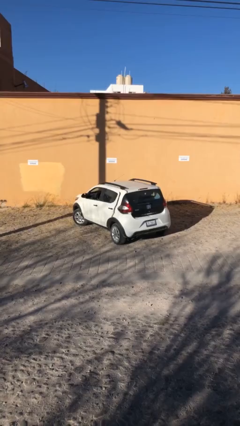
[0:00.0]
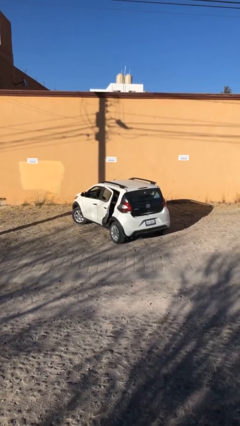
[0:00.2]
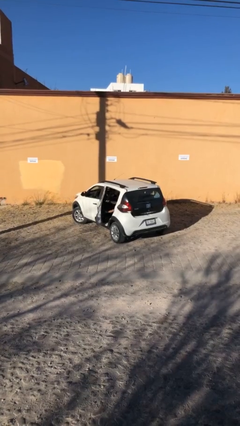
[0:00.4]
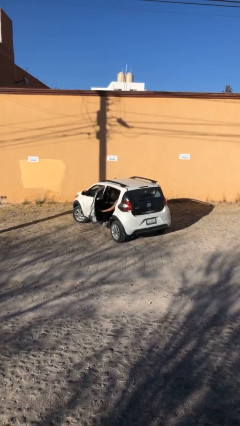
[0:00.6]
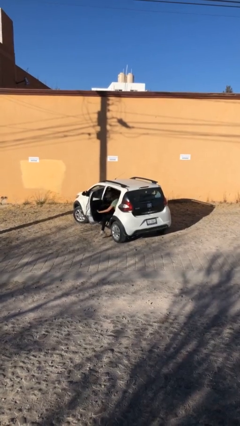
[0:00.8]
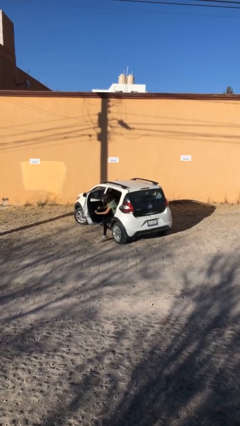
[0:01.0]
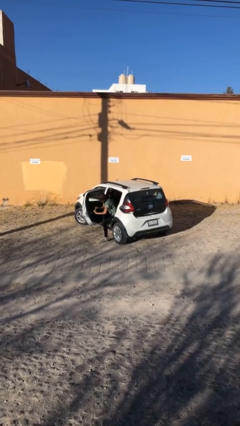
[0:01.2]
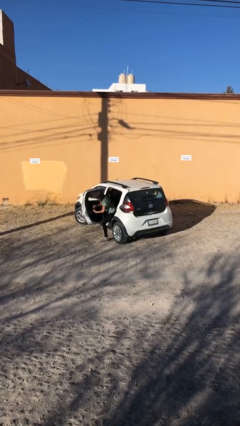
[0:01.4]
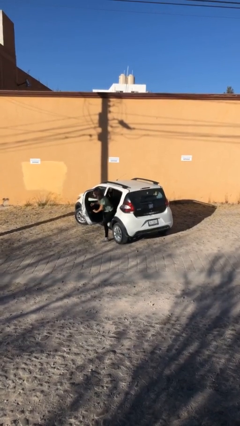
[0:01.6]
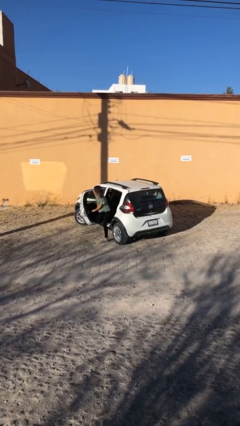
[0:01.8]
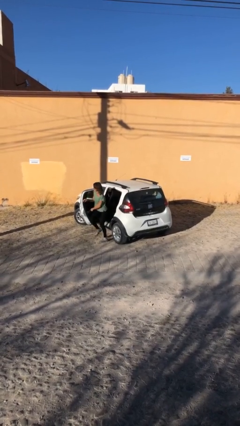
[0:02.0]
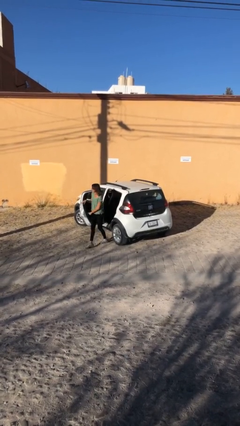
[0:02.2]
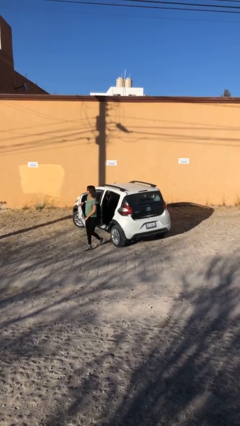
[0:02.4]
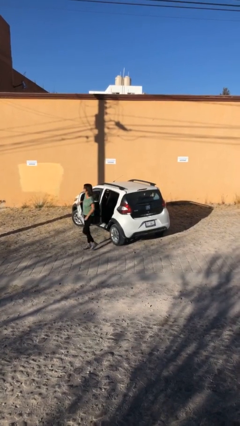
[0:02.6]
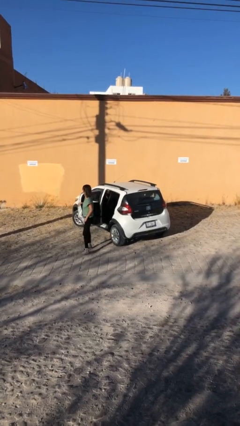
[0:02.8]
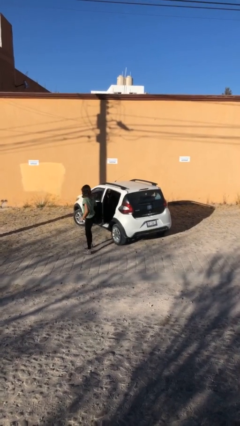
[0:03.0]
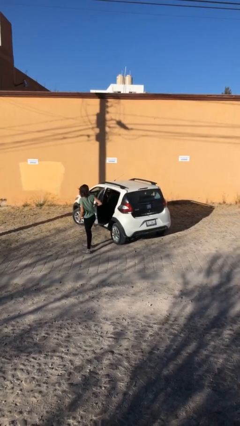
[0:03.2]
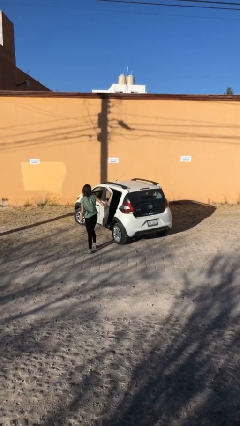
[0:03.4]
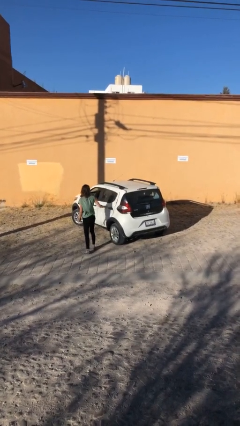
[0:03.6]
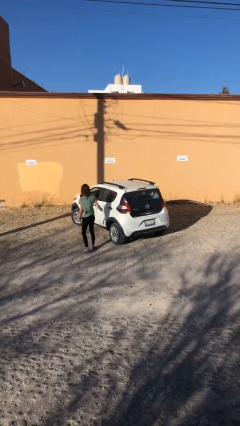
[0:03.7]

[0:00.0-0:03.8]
car drops off person

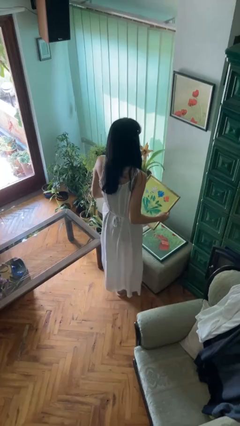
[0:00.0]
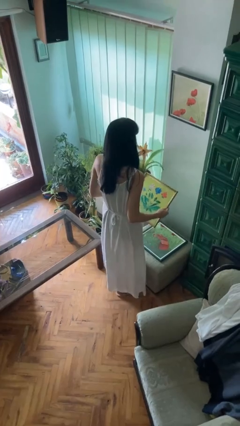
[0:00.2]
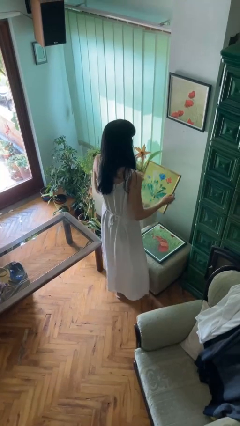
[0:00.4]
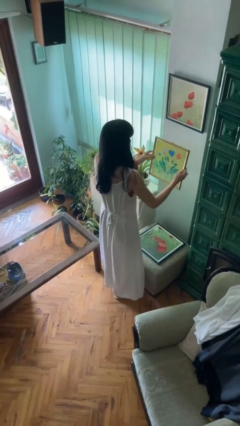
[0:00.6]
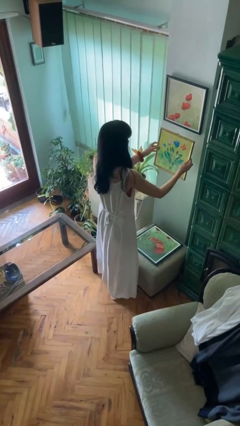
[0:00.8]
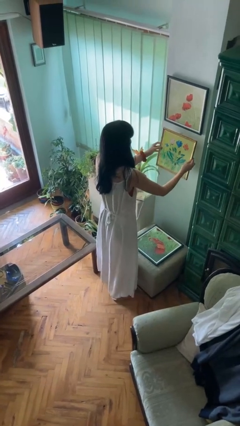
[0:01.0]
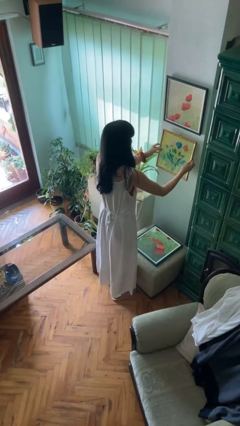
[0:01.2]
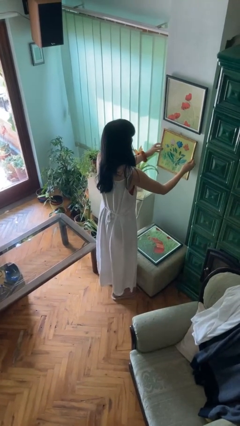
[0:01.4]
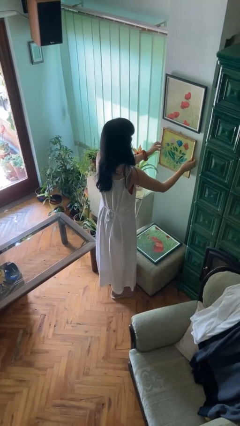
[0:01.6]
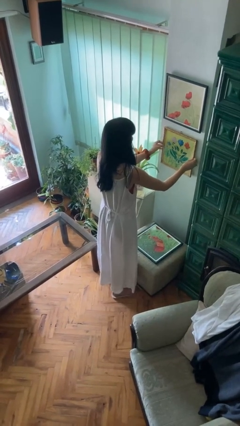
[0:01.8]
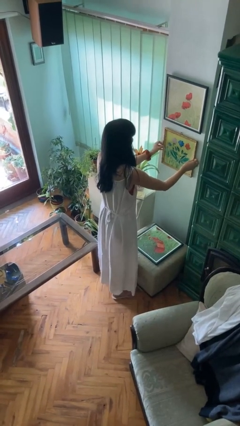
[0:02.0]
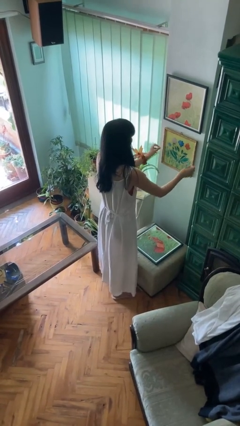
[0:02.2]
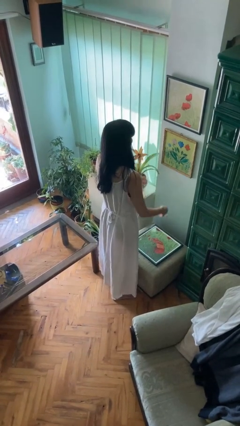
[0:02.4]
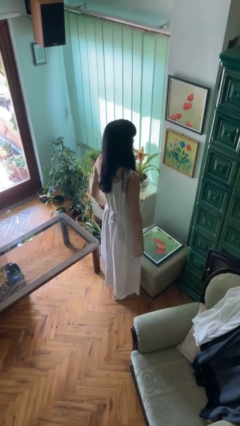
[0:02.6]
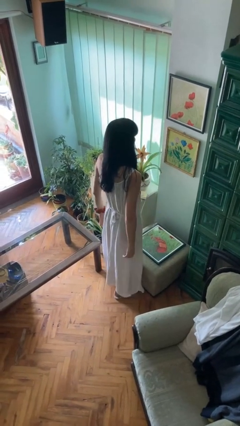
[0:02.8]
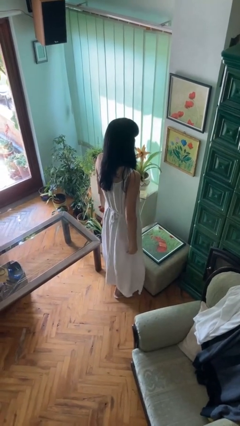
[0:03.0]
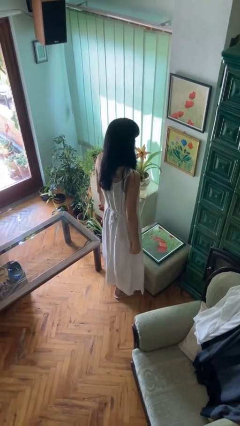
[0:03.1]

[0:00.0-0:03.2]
person puts up picture frame

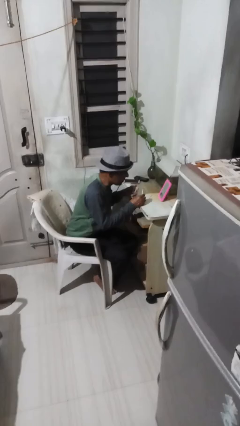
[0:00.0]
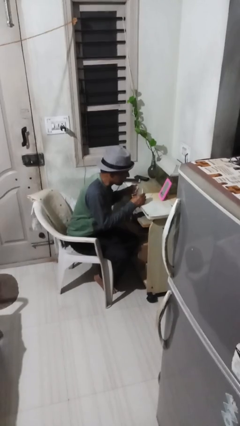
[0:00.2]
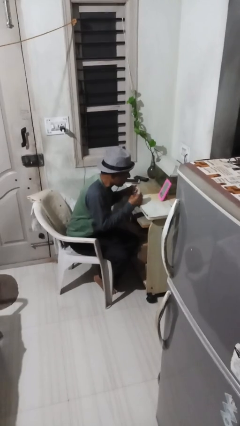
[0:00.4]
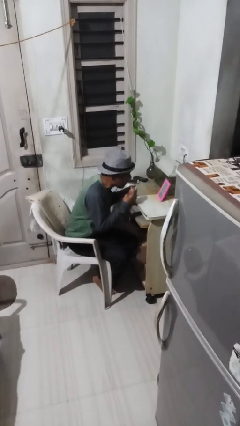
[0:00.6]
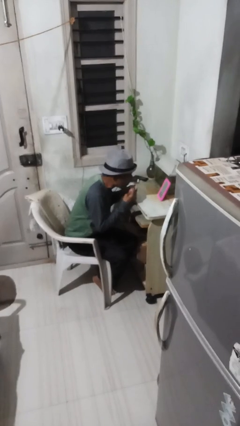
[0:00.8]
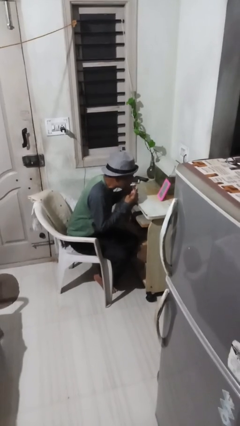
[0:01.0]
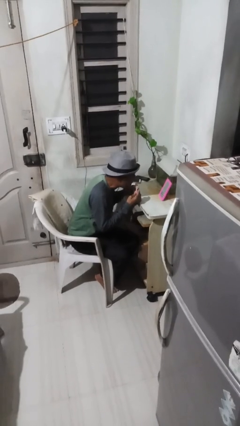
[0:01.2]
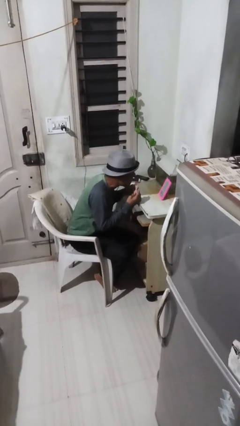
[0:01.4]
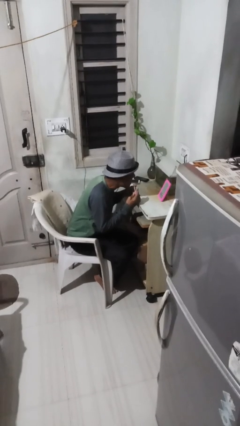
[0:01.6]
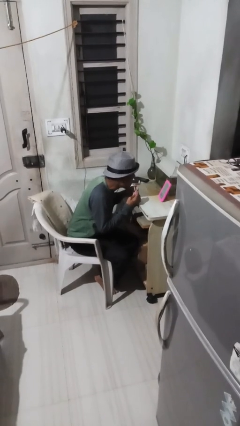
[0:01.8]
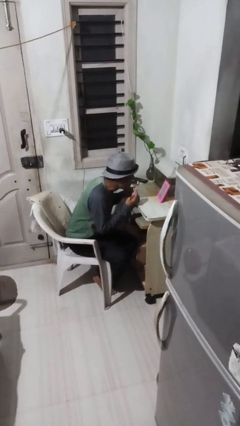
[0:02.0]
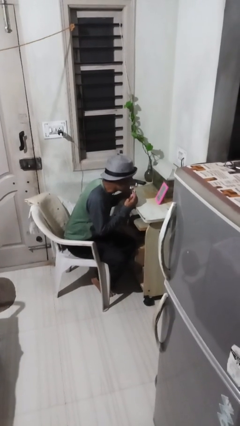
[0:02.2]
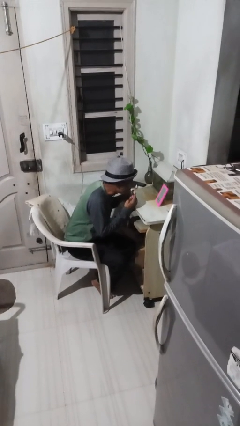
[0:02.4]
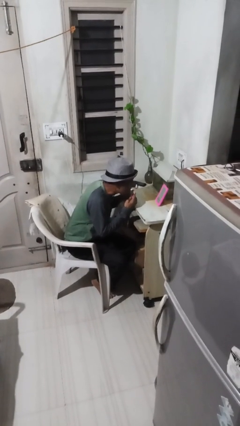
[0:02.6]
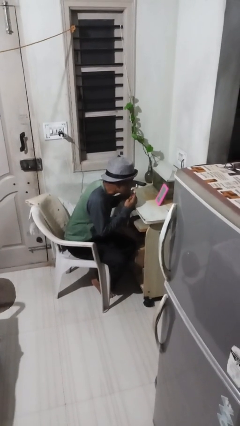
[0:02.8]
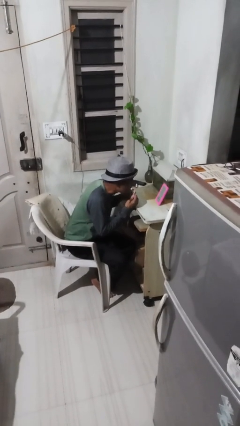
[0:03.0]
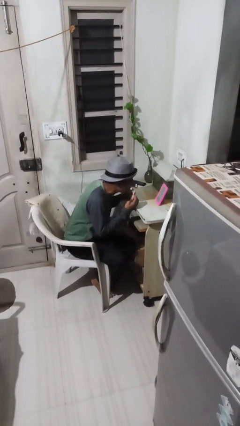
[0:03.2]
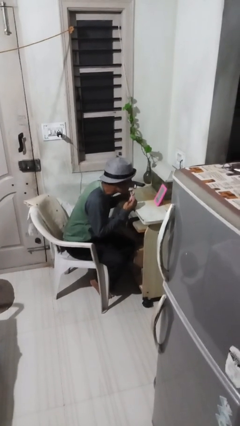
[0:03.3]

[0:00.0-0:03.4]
person applies lip makeup

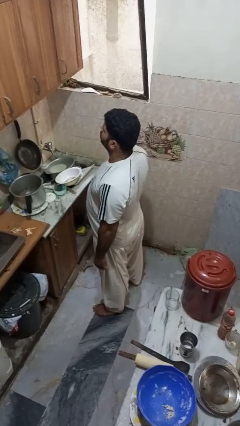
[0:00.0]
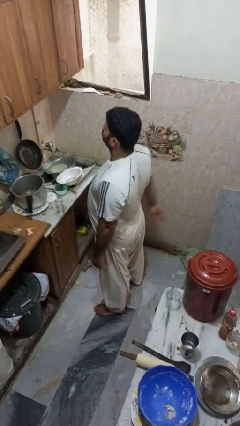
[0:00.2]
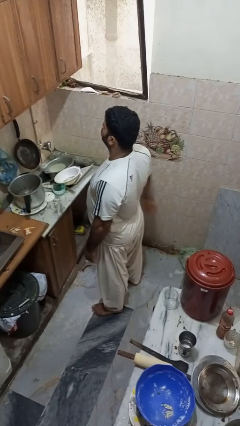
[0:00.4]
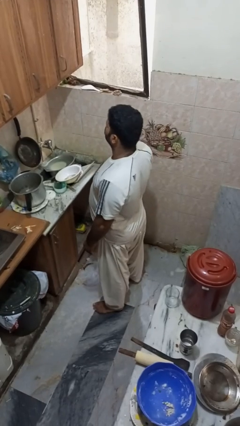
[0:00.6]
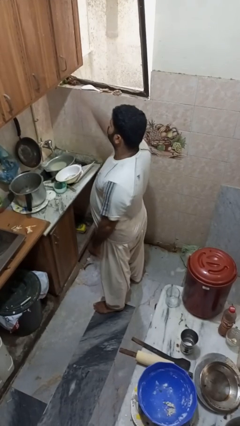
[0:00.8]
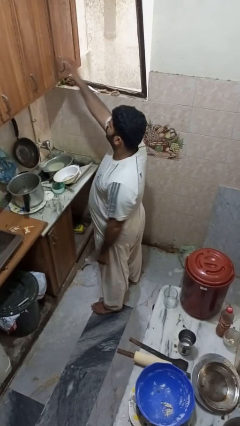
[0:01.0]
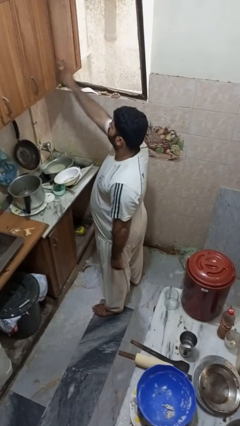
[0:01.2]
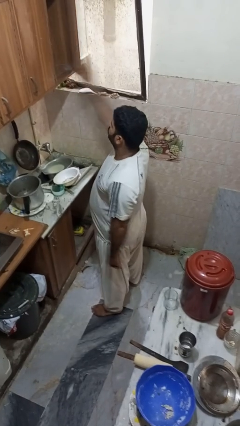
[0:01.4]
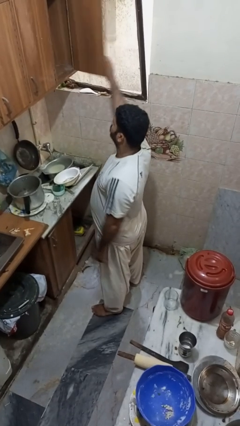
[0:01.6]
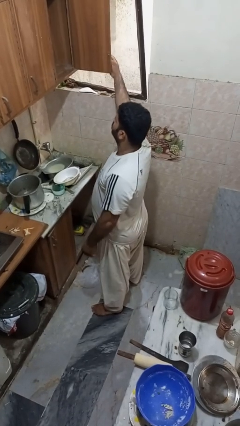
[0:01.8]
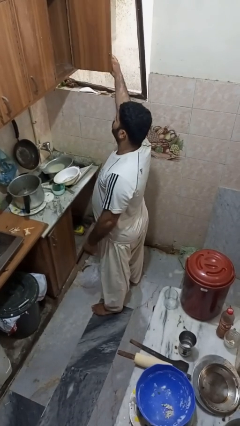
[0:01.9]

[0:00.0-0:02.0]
person opens cabinet

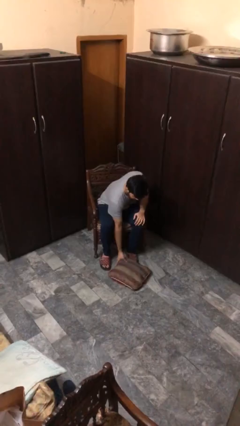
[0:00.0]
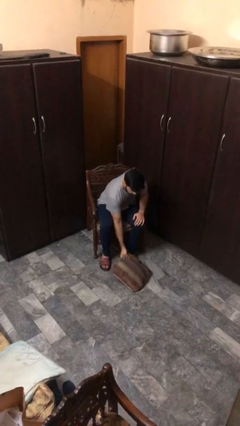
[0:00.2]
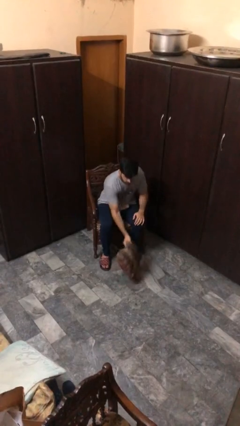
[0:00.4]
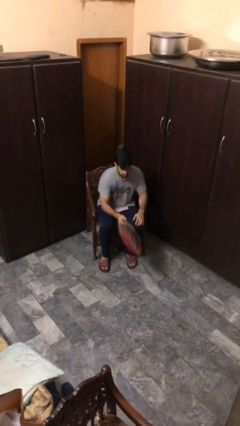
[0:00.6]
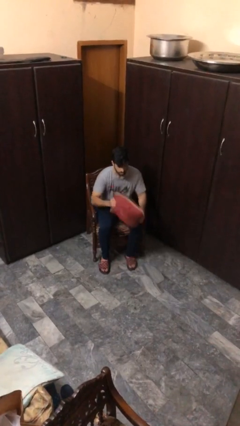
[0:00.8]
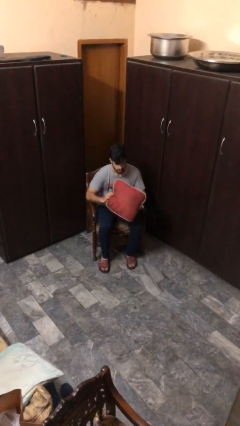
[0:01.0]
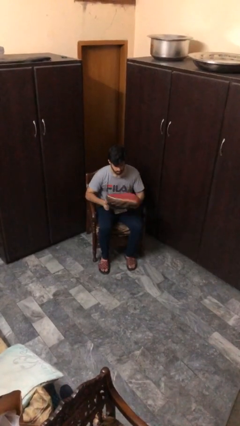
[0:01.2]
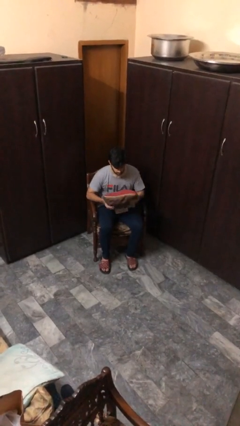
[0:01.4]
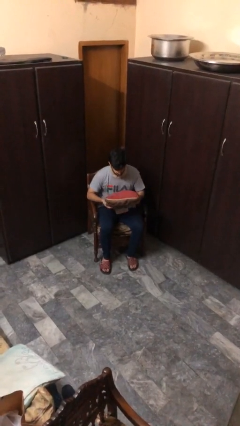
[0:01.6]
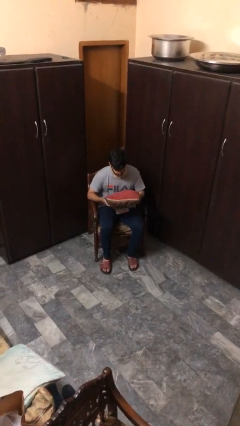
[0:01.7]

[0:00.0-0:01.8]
person picks up object from floor

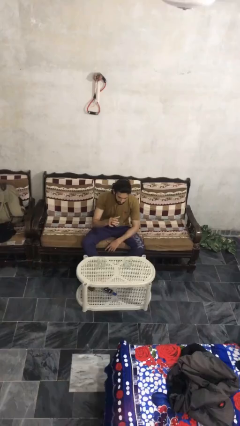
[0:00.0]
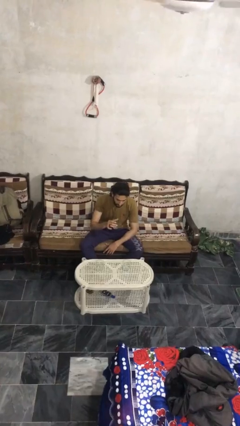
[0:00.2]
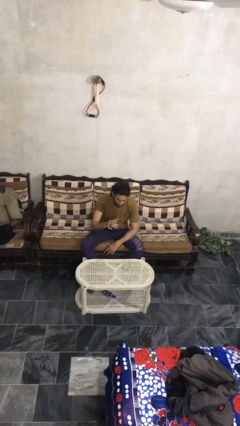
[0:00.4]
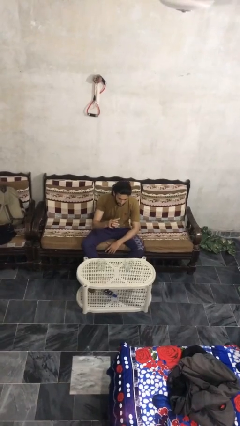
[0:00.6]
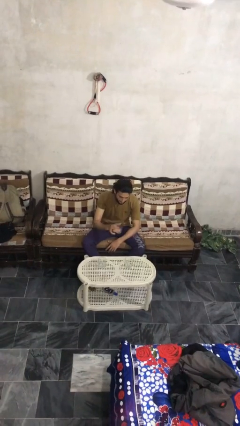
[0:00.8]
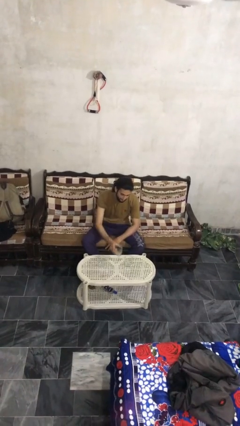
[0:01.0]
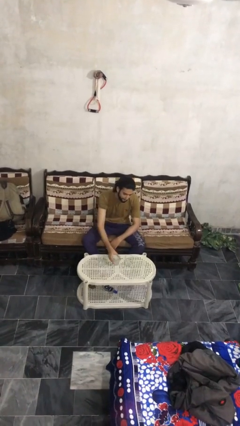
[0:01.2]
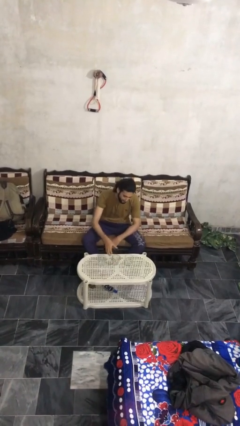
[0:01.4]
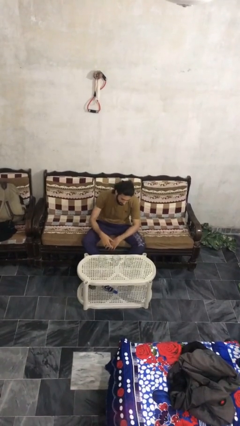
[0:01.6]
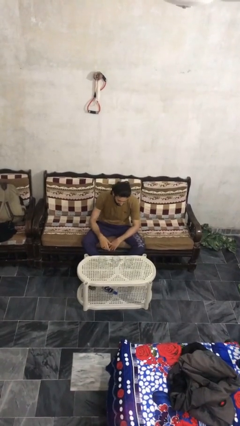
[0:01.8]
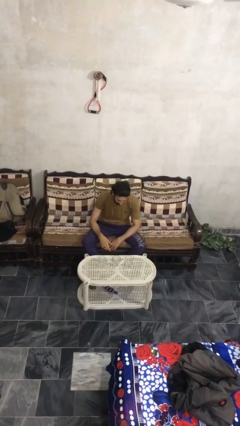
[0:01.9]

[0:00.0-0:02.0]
person puts down object on table

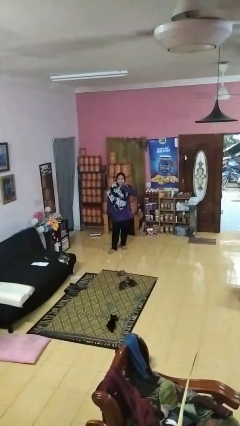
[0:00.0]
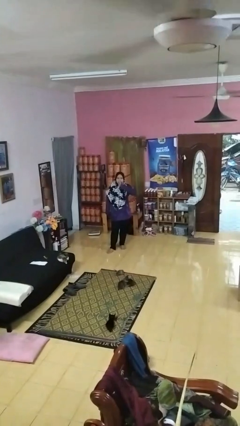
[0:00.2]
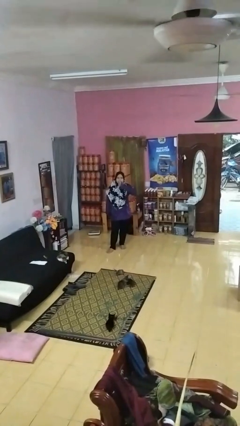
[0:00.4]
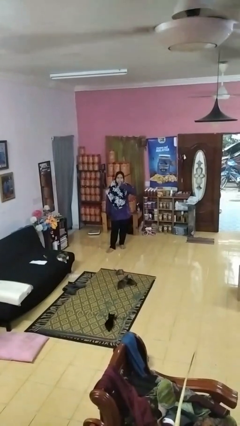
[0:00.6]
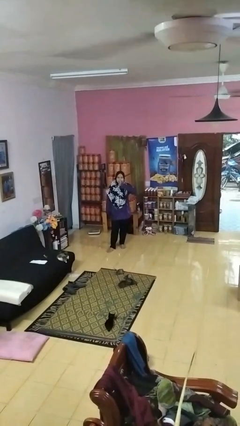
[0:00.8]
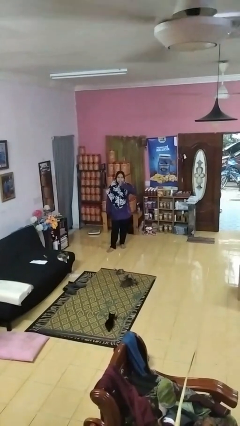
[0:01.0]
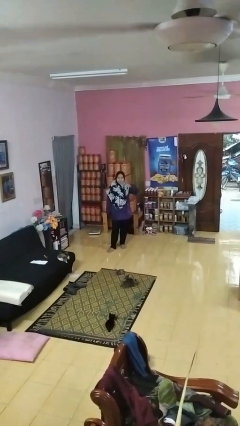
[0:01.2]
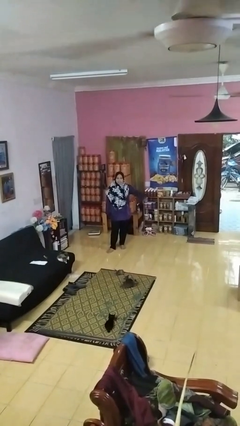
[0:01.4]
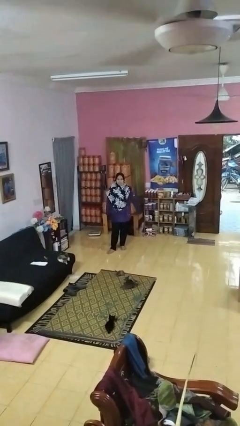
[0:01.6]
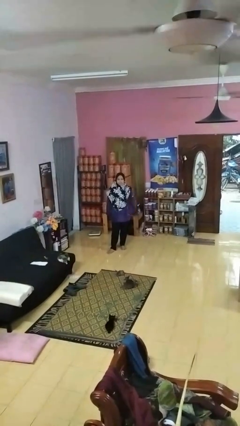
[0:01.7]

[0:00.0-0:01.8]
person gestures be quiet
